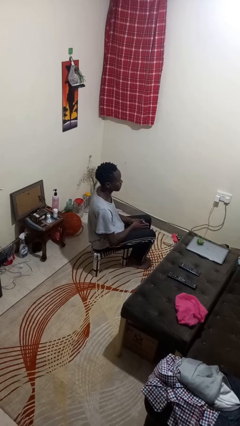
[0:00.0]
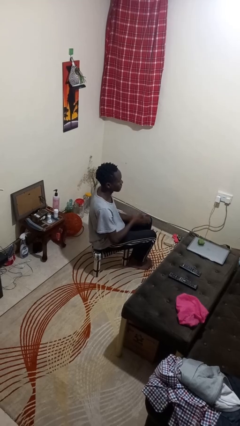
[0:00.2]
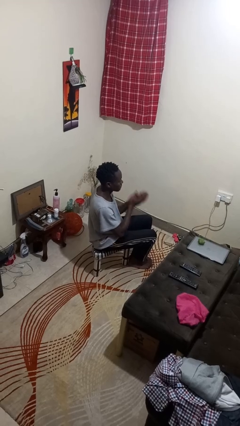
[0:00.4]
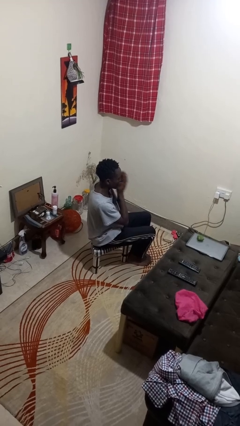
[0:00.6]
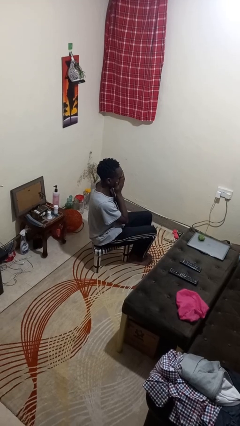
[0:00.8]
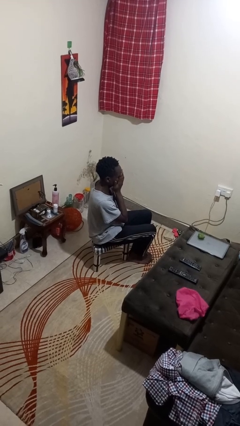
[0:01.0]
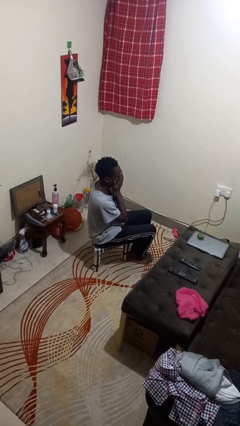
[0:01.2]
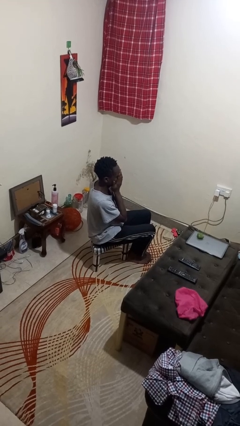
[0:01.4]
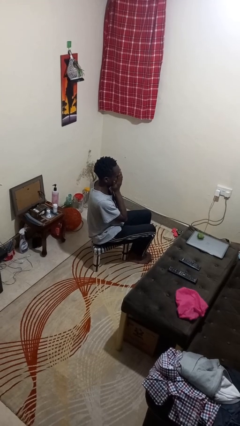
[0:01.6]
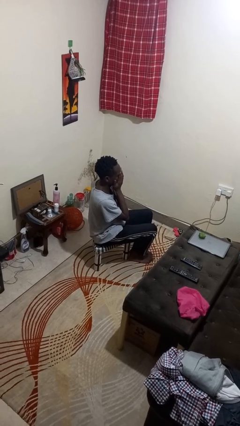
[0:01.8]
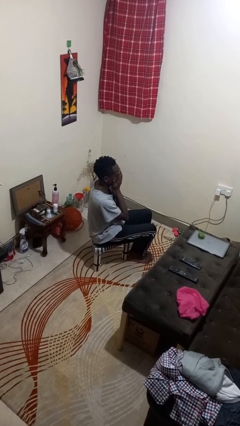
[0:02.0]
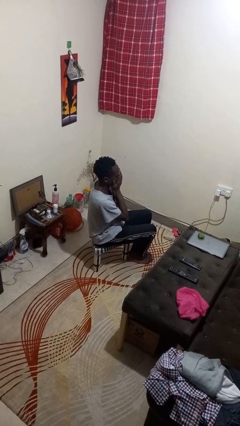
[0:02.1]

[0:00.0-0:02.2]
person covers face with hands

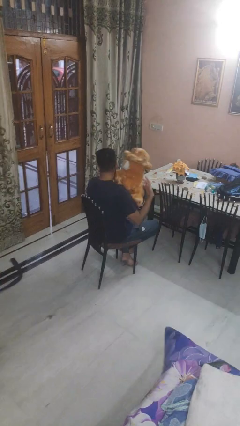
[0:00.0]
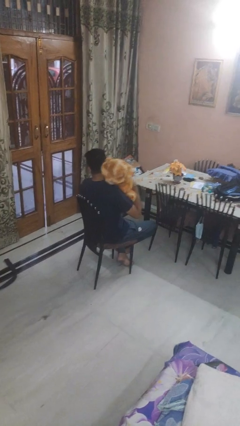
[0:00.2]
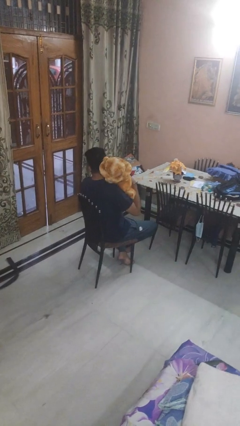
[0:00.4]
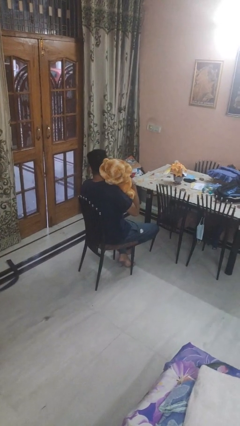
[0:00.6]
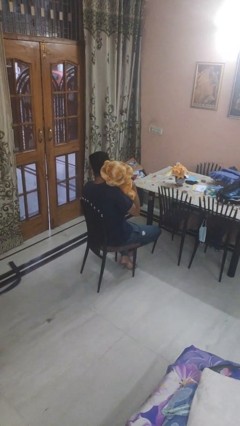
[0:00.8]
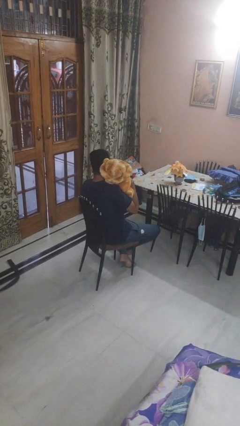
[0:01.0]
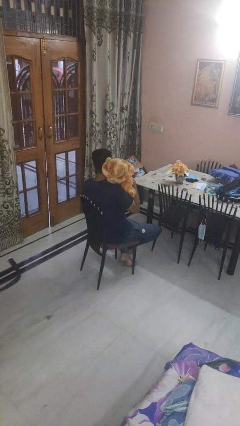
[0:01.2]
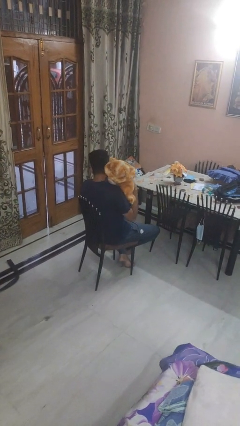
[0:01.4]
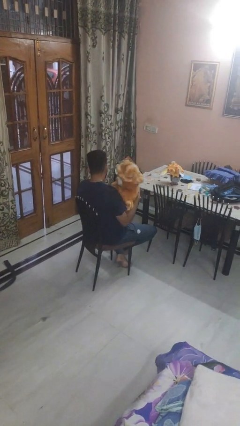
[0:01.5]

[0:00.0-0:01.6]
person hugs stuffed animal

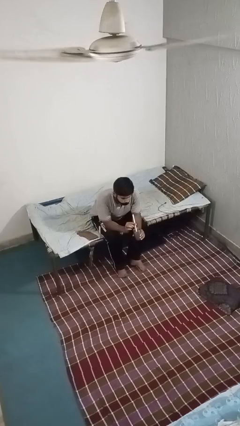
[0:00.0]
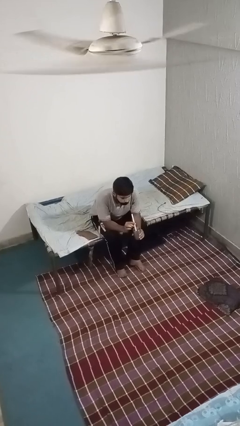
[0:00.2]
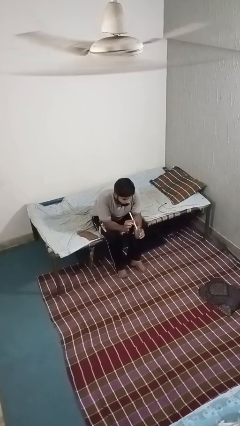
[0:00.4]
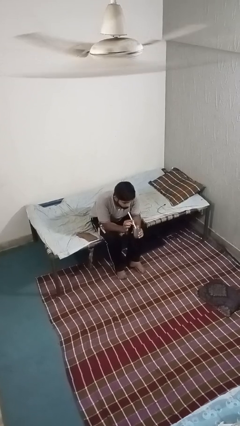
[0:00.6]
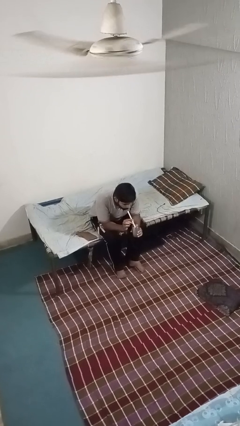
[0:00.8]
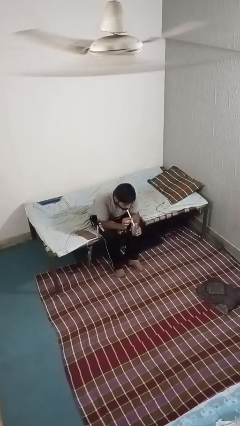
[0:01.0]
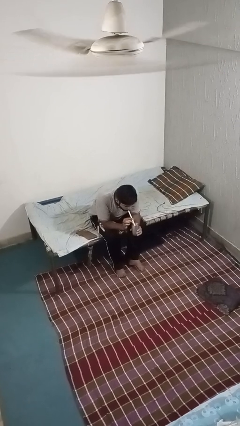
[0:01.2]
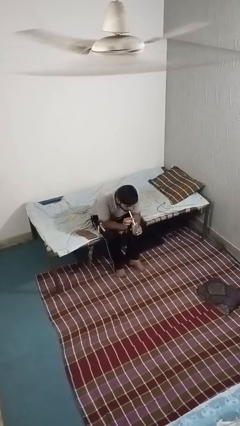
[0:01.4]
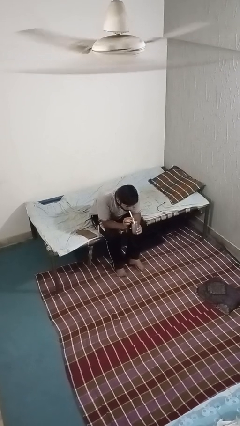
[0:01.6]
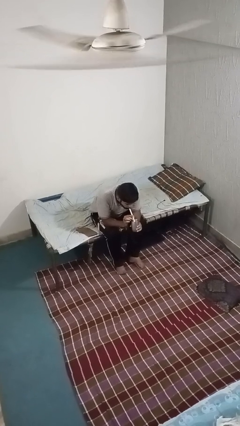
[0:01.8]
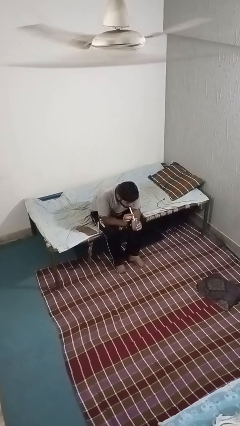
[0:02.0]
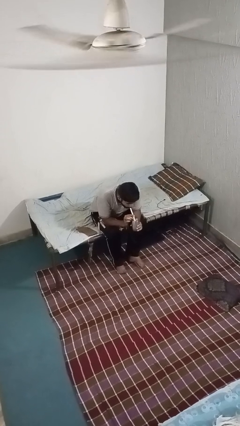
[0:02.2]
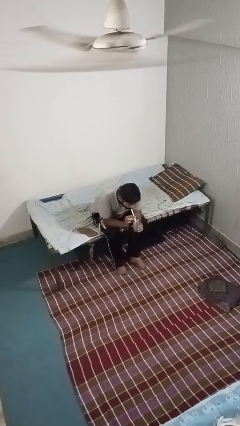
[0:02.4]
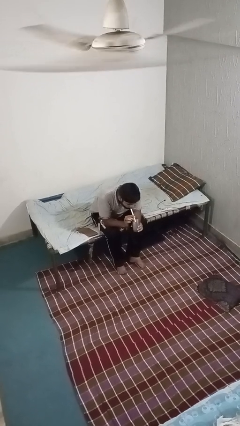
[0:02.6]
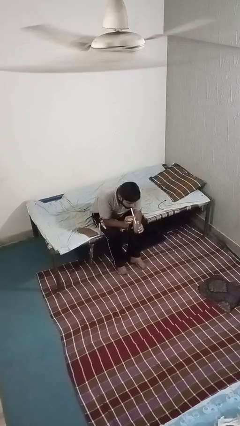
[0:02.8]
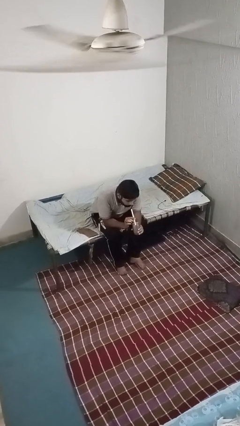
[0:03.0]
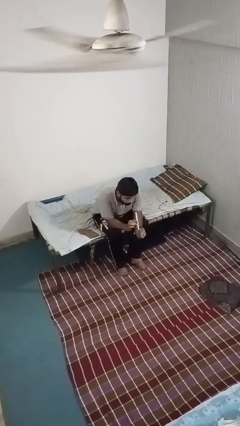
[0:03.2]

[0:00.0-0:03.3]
person drinks from straw

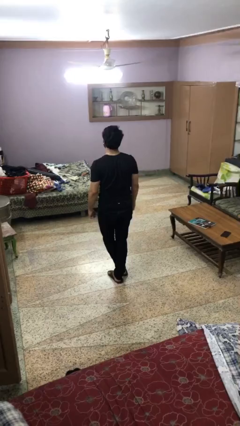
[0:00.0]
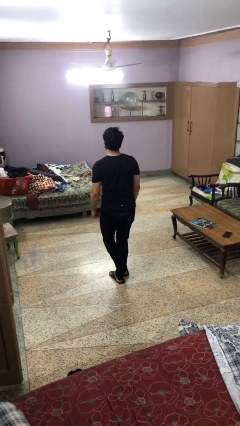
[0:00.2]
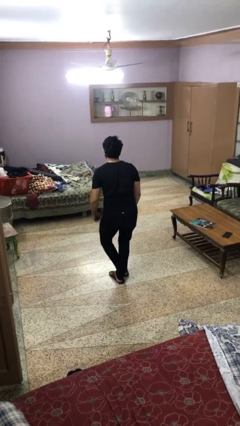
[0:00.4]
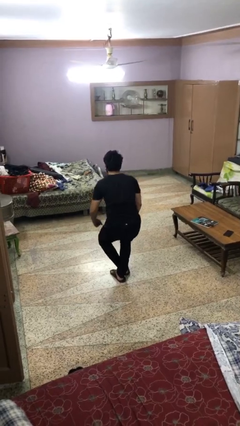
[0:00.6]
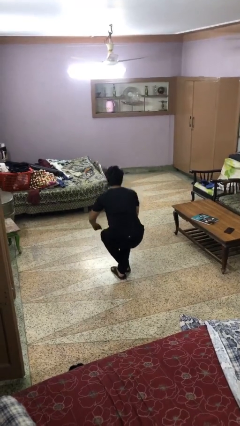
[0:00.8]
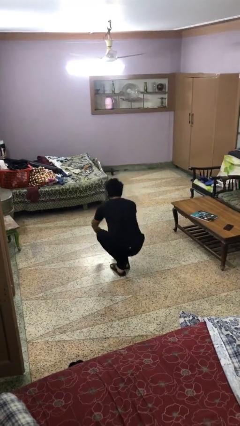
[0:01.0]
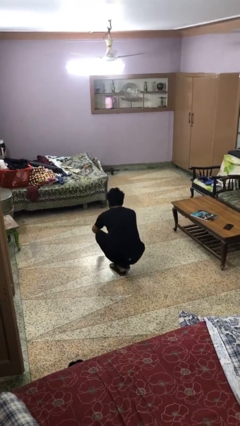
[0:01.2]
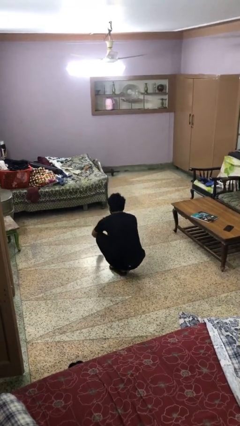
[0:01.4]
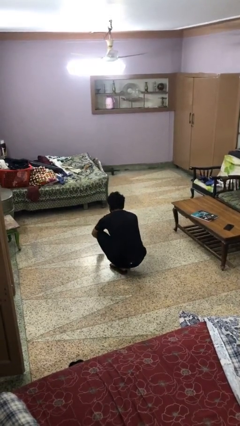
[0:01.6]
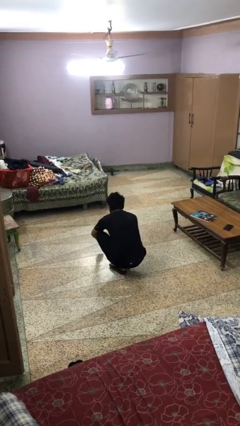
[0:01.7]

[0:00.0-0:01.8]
person sits crisscross

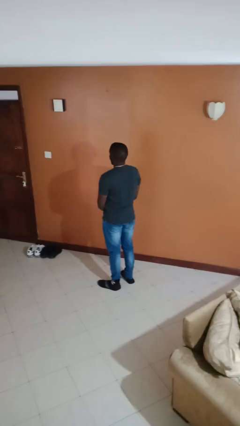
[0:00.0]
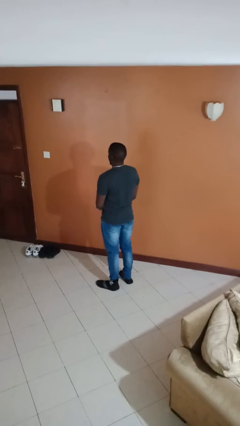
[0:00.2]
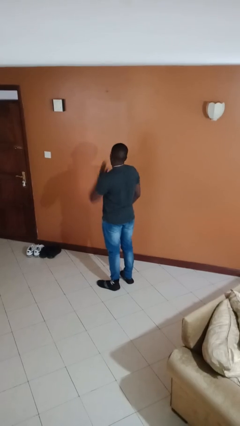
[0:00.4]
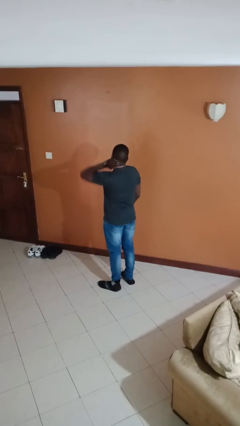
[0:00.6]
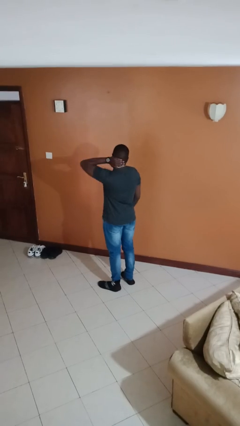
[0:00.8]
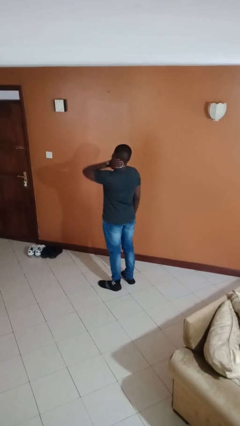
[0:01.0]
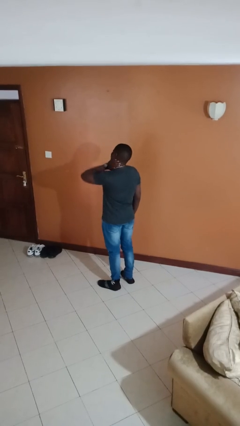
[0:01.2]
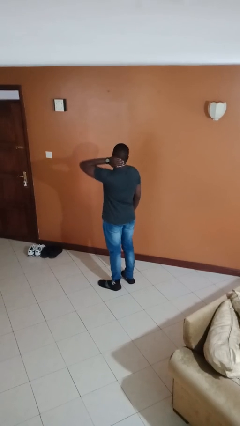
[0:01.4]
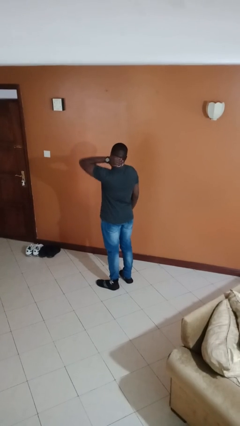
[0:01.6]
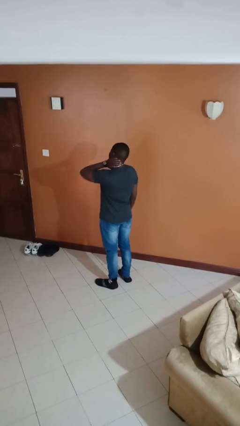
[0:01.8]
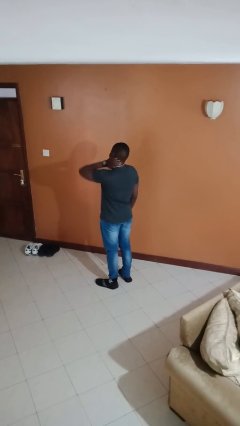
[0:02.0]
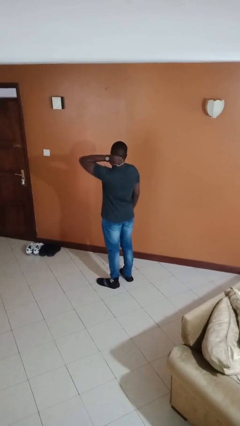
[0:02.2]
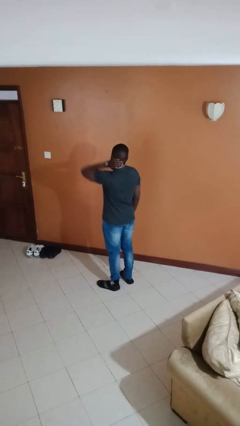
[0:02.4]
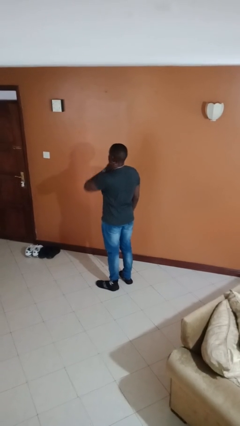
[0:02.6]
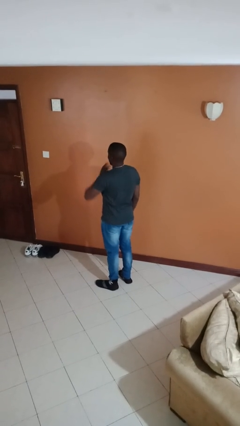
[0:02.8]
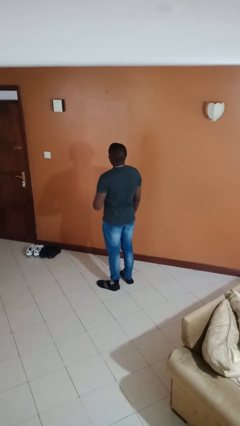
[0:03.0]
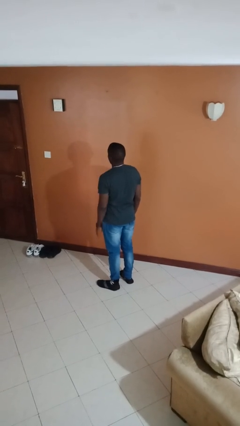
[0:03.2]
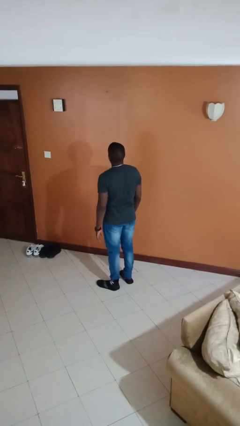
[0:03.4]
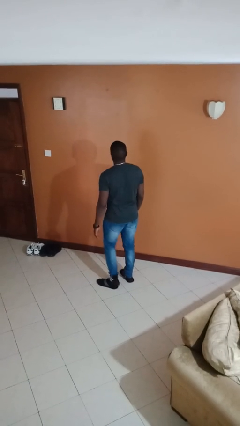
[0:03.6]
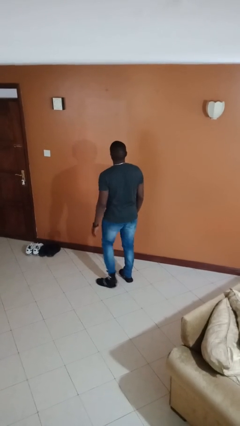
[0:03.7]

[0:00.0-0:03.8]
person rubs neck

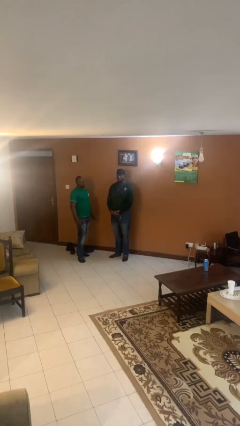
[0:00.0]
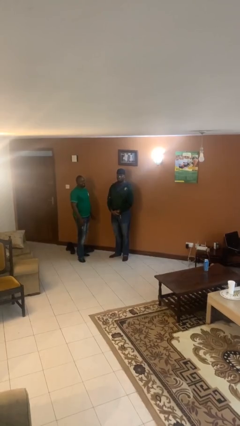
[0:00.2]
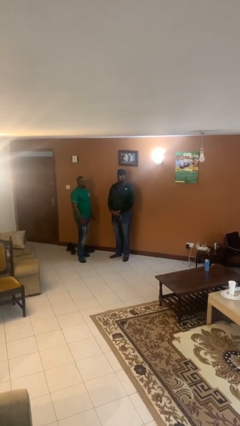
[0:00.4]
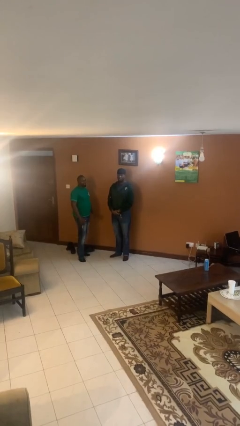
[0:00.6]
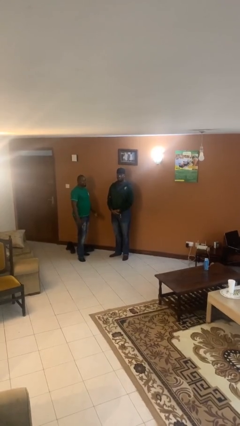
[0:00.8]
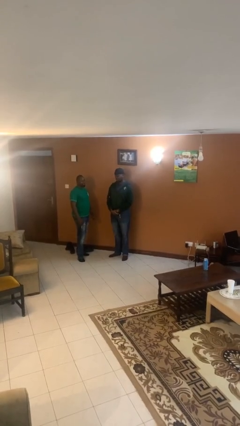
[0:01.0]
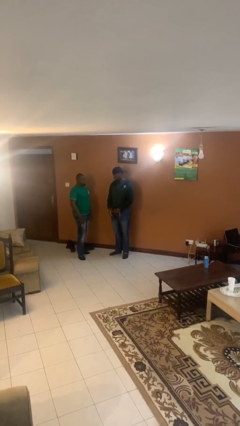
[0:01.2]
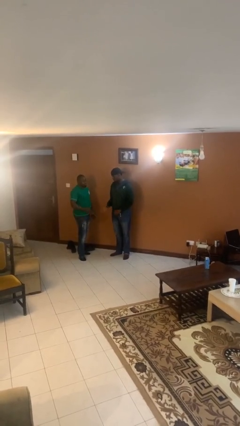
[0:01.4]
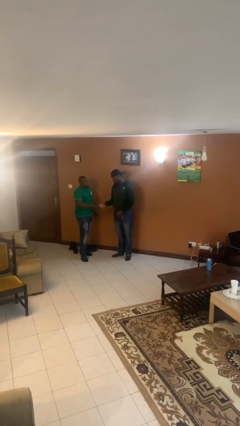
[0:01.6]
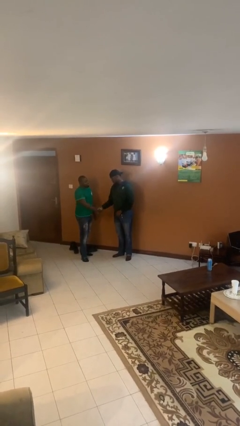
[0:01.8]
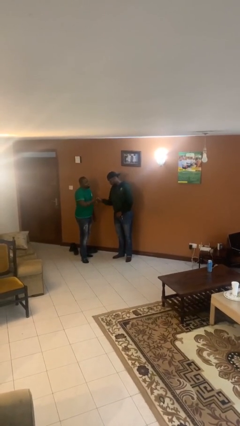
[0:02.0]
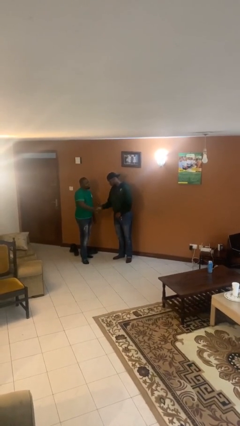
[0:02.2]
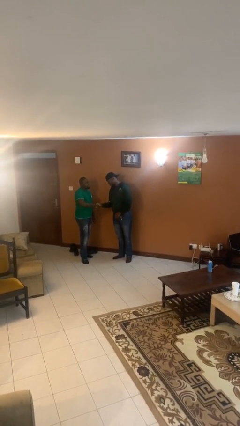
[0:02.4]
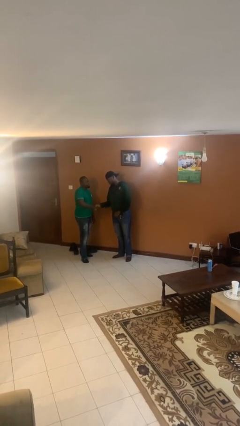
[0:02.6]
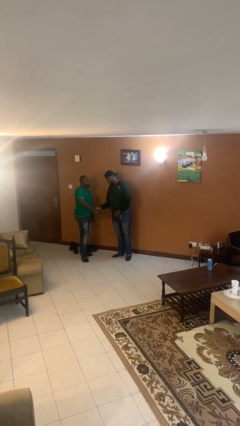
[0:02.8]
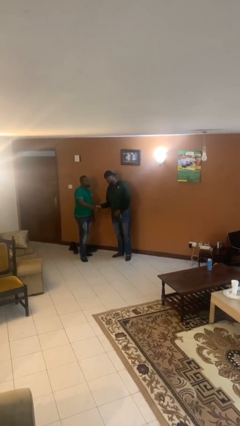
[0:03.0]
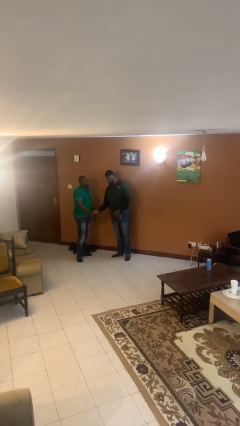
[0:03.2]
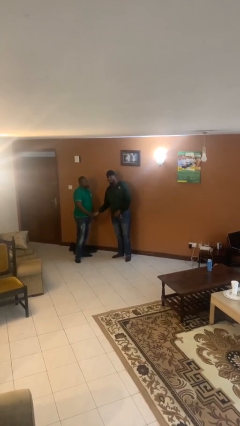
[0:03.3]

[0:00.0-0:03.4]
person shakes hand

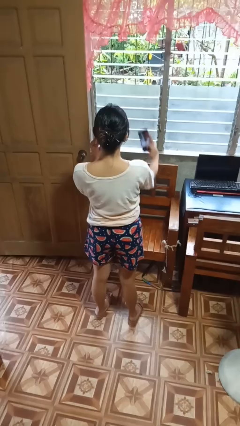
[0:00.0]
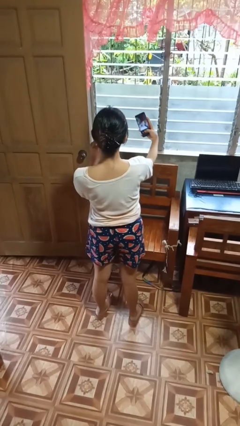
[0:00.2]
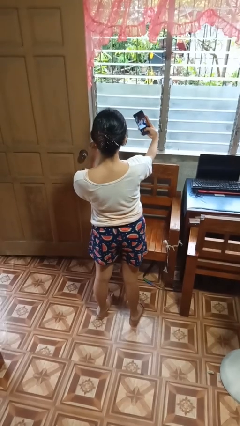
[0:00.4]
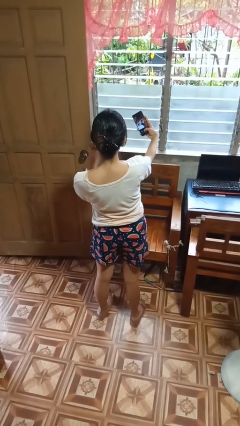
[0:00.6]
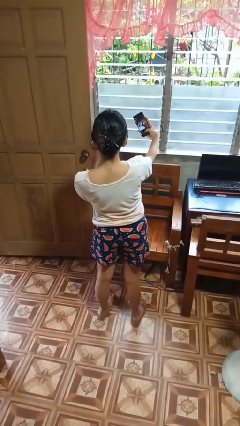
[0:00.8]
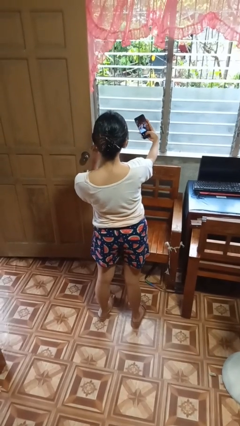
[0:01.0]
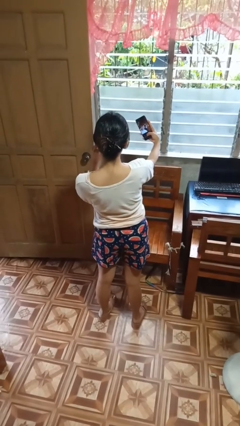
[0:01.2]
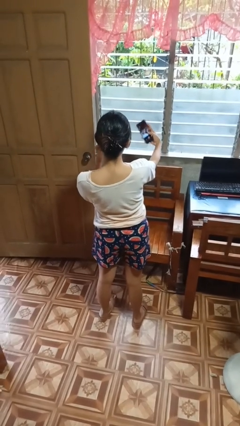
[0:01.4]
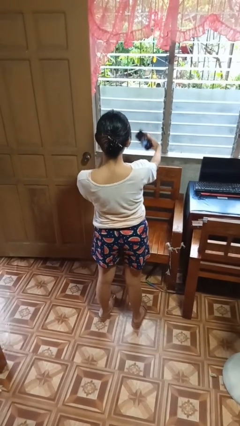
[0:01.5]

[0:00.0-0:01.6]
person takes selfie
